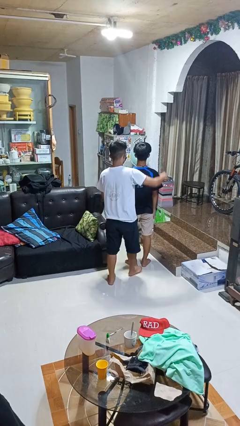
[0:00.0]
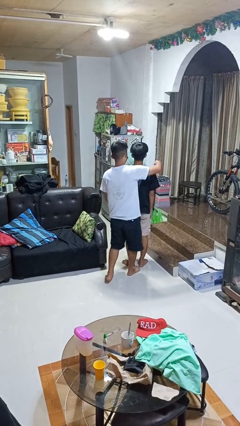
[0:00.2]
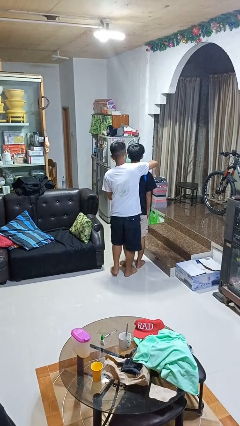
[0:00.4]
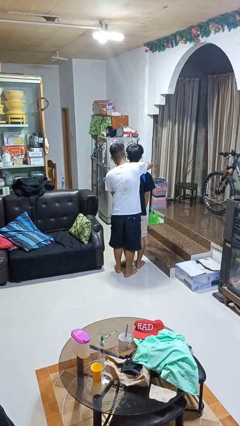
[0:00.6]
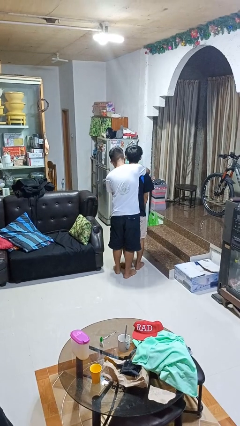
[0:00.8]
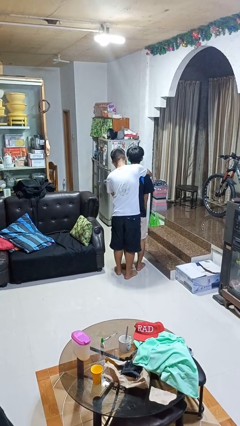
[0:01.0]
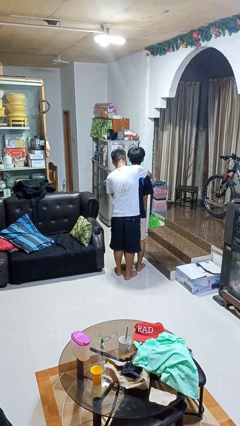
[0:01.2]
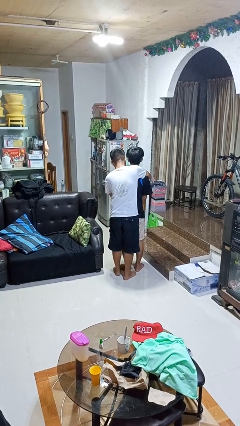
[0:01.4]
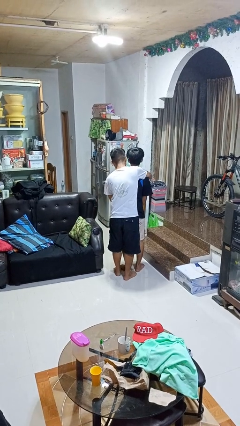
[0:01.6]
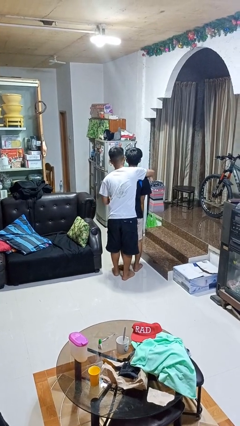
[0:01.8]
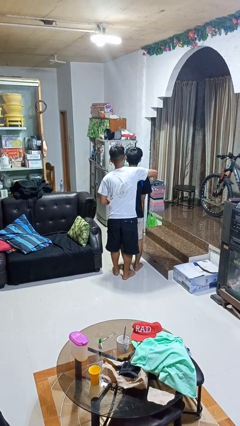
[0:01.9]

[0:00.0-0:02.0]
person hugs person from behind

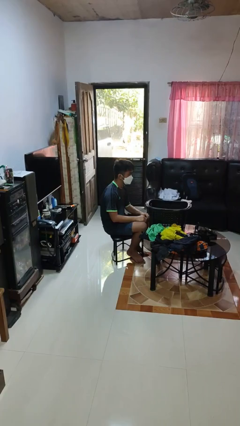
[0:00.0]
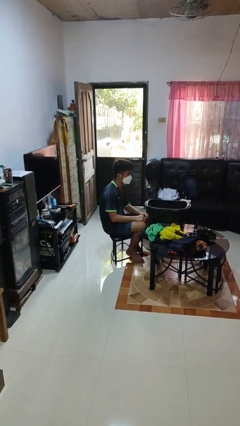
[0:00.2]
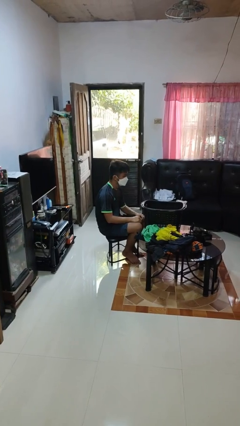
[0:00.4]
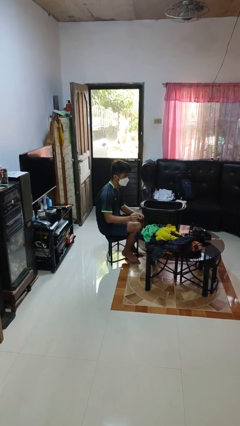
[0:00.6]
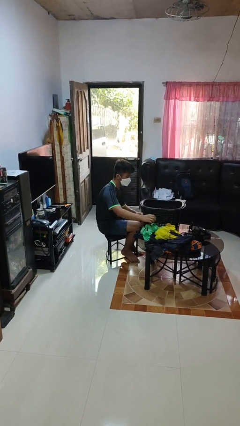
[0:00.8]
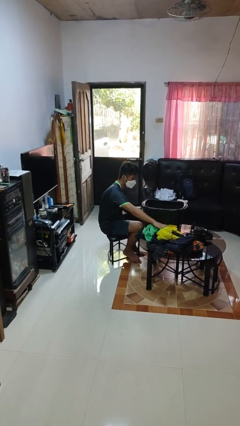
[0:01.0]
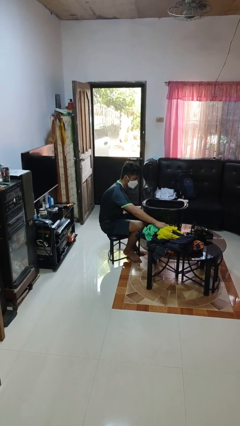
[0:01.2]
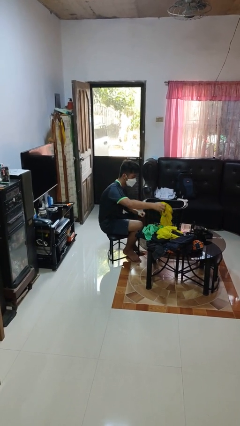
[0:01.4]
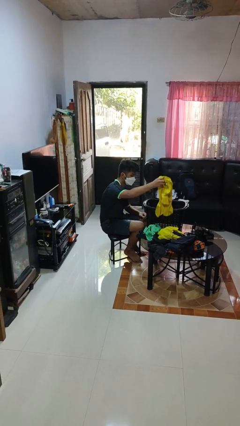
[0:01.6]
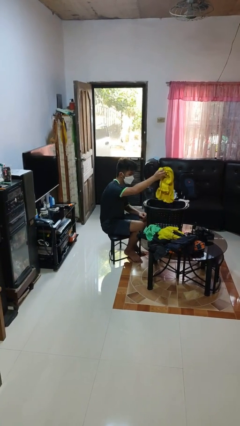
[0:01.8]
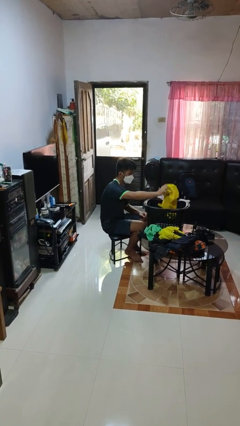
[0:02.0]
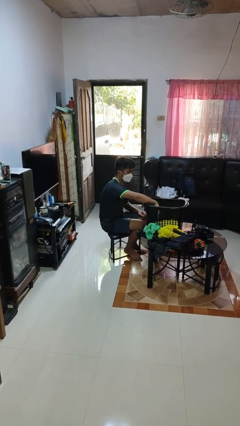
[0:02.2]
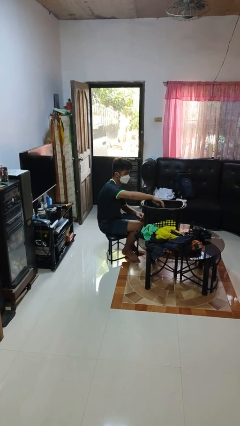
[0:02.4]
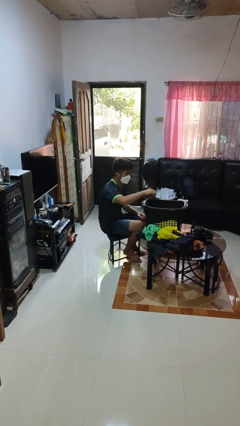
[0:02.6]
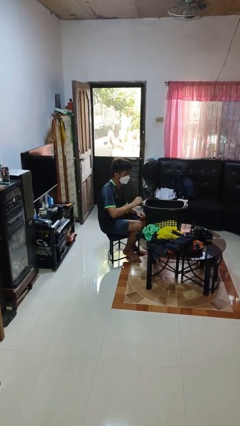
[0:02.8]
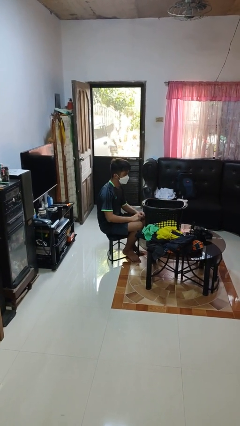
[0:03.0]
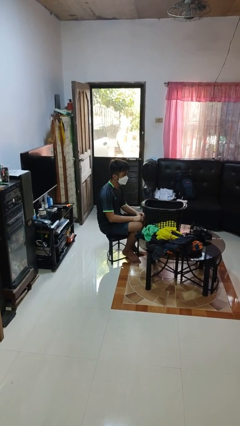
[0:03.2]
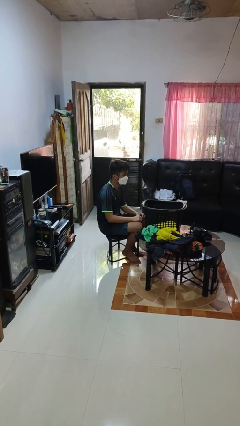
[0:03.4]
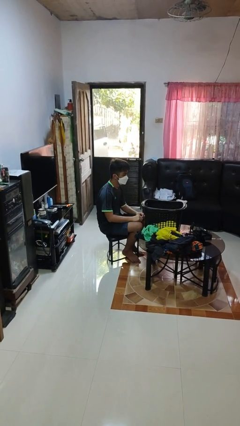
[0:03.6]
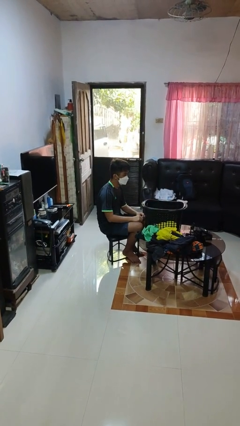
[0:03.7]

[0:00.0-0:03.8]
person puts object into basket

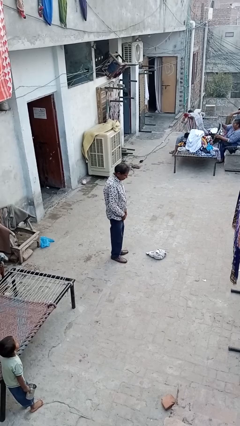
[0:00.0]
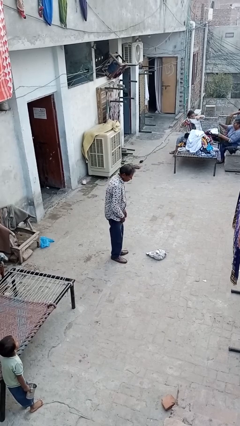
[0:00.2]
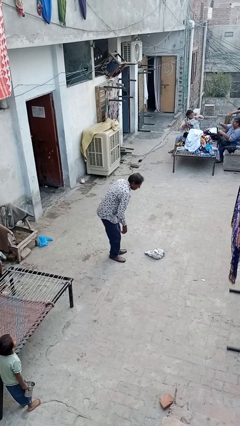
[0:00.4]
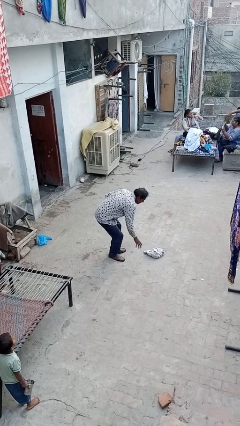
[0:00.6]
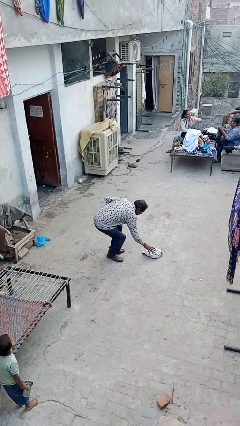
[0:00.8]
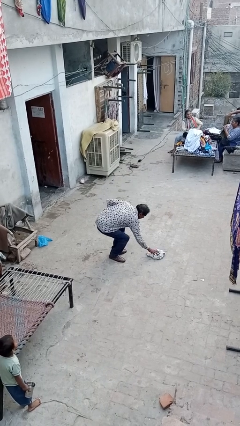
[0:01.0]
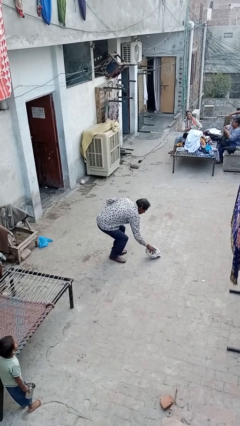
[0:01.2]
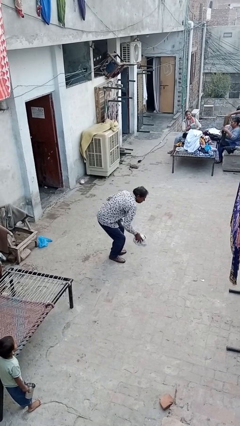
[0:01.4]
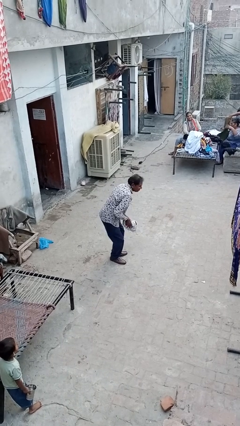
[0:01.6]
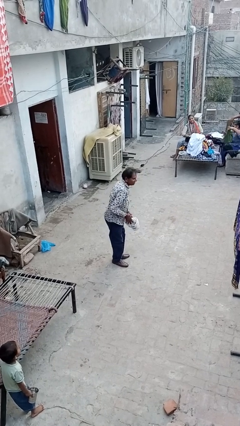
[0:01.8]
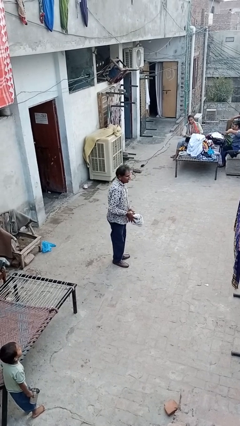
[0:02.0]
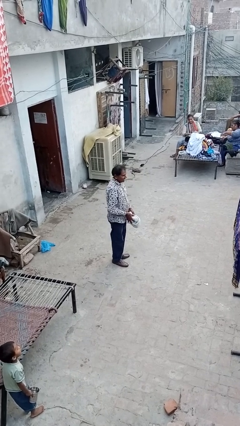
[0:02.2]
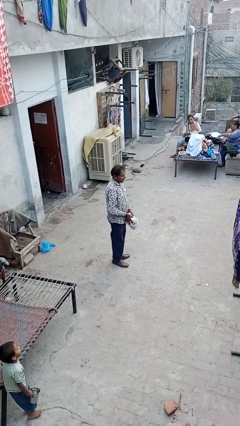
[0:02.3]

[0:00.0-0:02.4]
person picks up object from floor

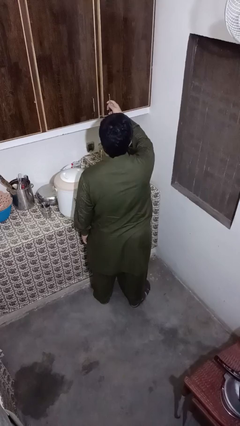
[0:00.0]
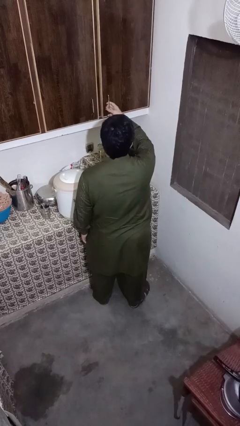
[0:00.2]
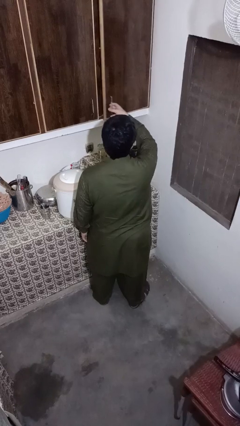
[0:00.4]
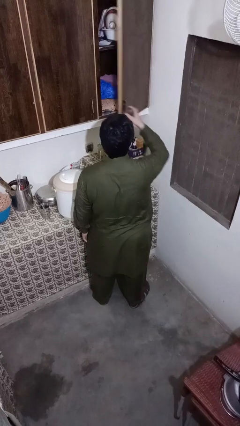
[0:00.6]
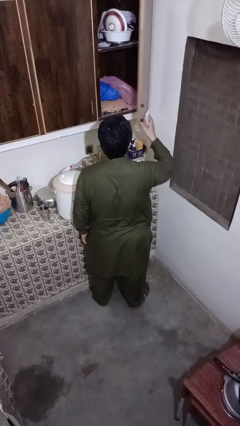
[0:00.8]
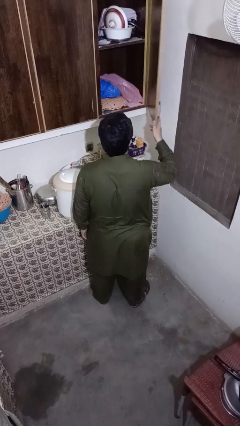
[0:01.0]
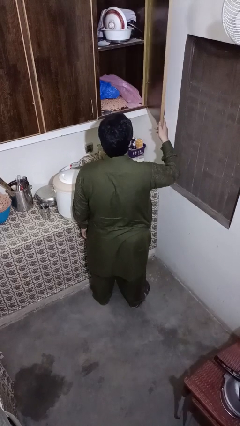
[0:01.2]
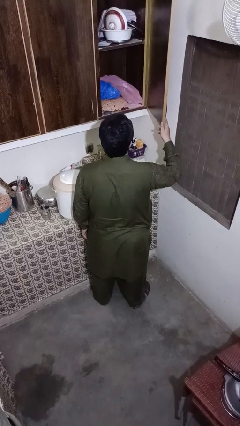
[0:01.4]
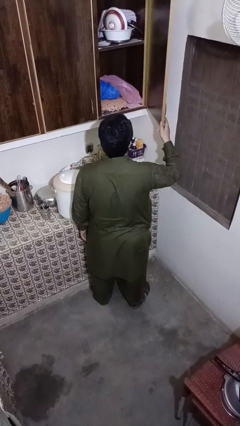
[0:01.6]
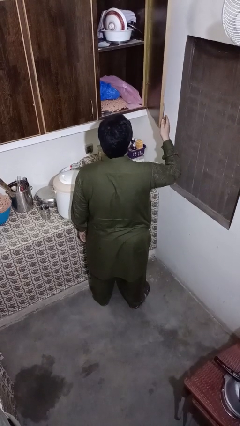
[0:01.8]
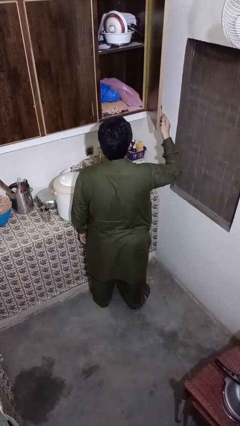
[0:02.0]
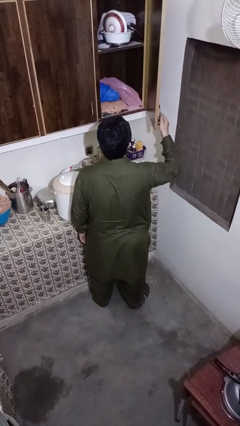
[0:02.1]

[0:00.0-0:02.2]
person opens kitchen drawer

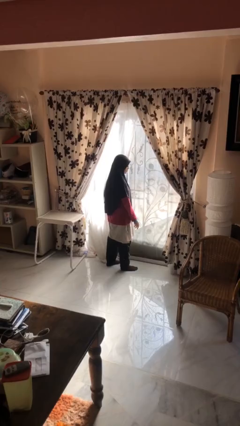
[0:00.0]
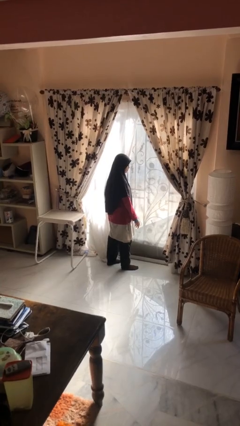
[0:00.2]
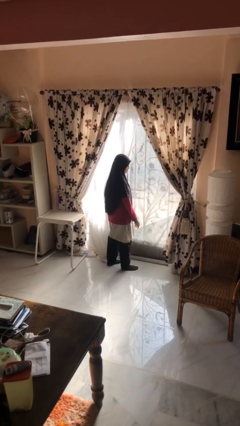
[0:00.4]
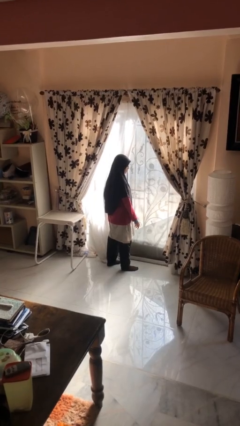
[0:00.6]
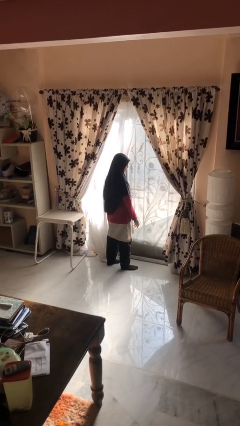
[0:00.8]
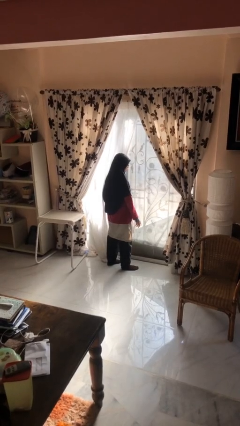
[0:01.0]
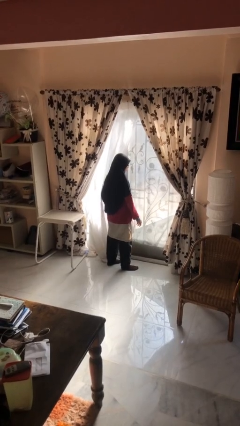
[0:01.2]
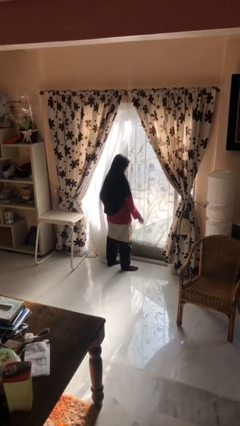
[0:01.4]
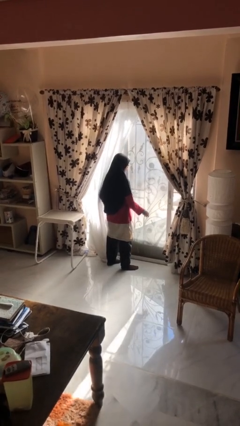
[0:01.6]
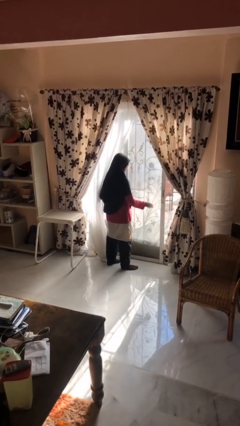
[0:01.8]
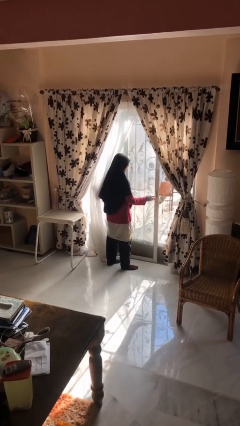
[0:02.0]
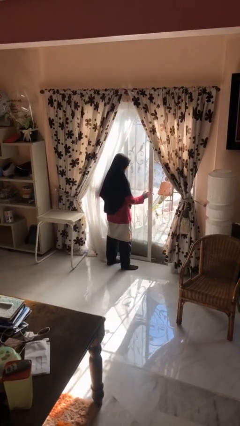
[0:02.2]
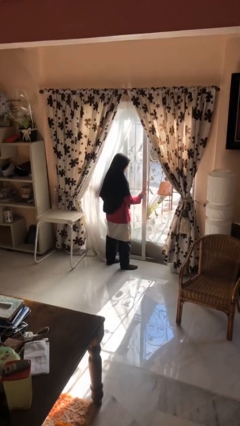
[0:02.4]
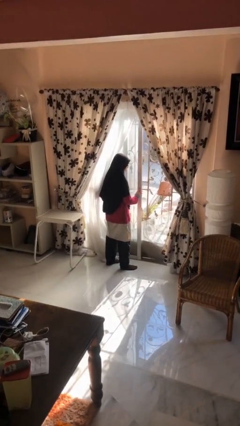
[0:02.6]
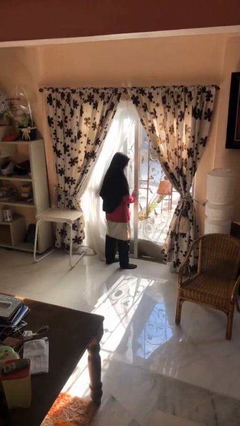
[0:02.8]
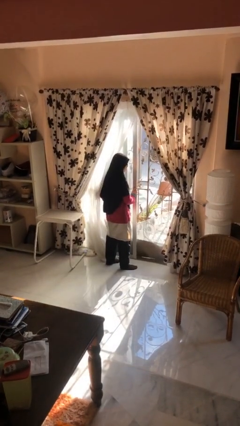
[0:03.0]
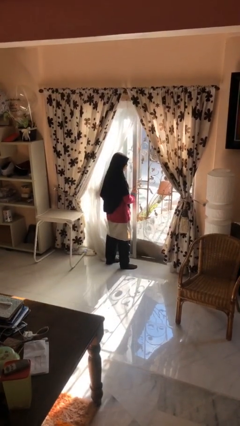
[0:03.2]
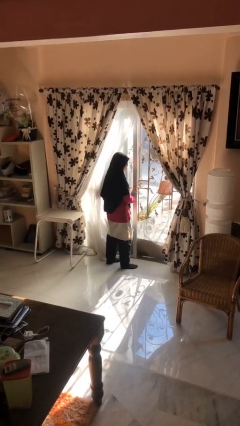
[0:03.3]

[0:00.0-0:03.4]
person opens sliding door

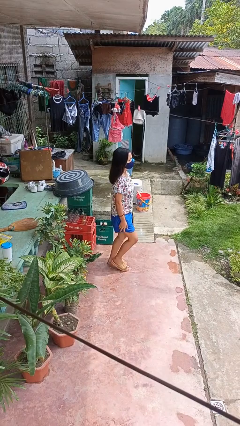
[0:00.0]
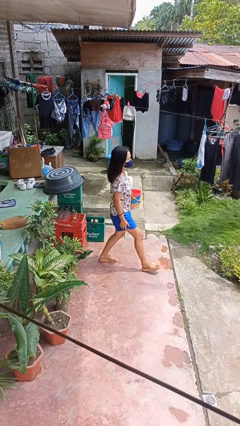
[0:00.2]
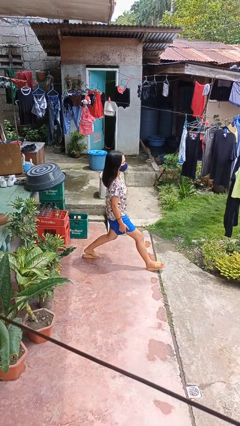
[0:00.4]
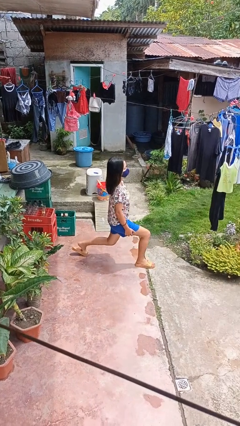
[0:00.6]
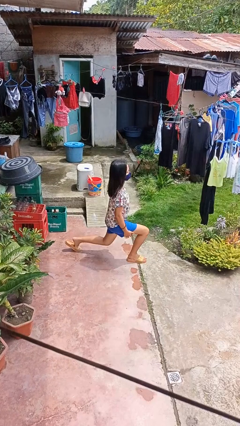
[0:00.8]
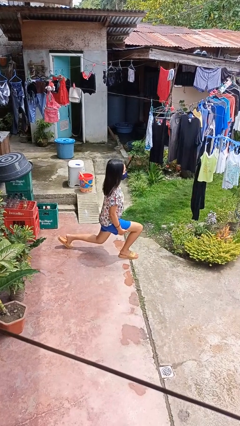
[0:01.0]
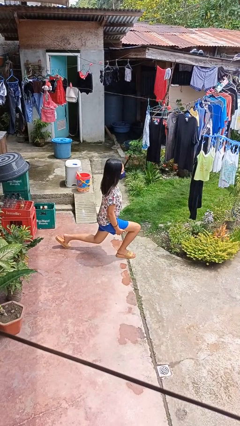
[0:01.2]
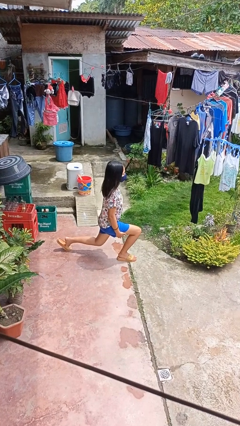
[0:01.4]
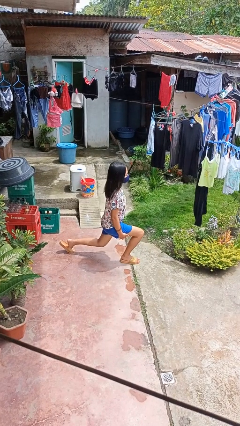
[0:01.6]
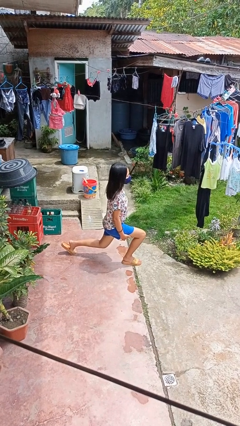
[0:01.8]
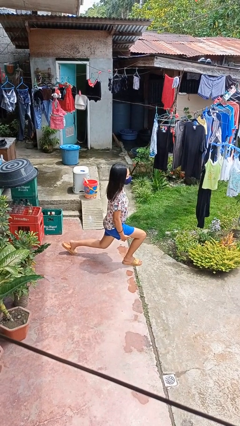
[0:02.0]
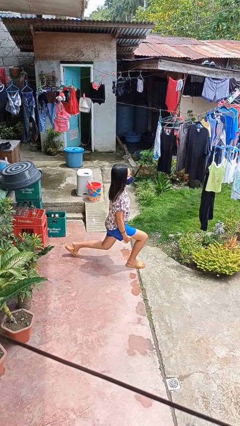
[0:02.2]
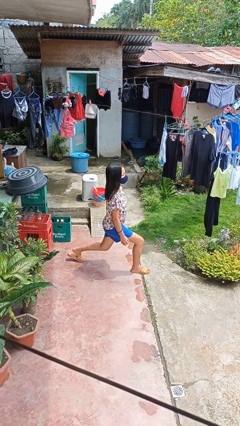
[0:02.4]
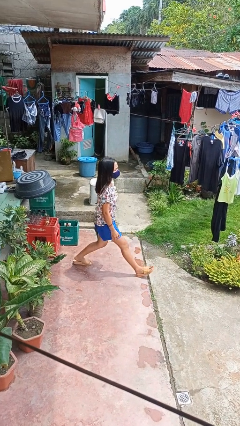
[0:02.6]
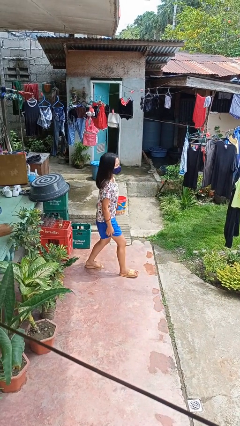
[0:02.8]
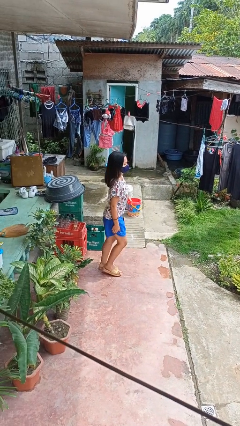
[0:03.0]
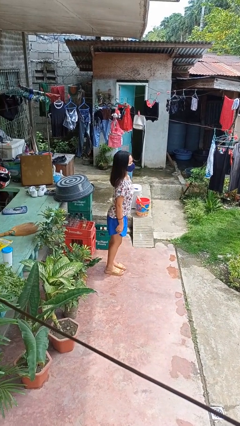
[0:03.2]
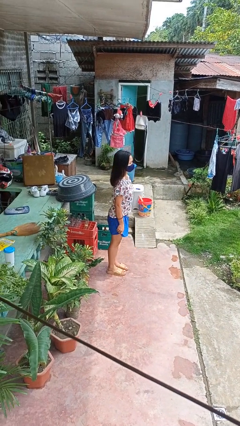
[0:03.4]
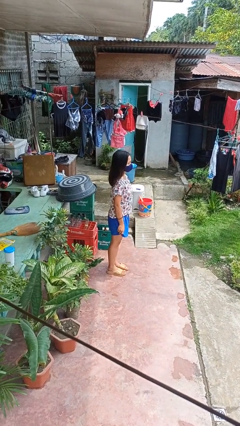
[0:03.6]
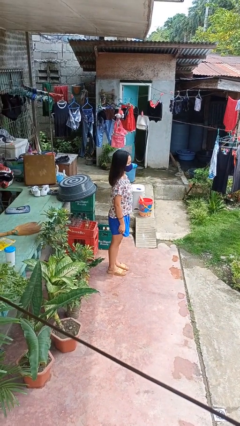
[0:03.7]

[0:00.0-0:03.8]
person exercises with lunges
